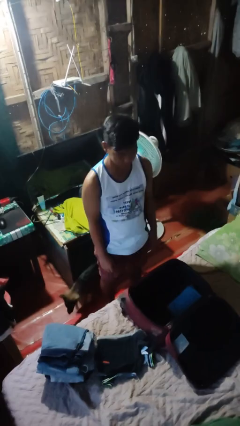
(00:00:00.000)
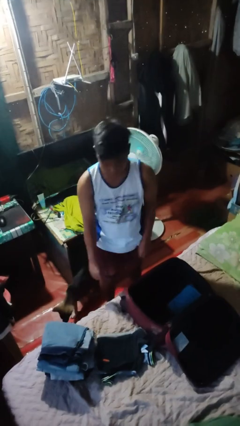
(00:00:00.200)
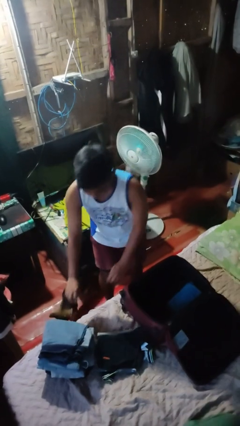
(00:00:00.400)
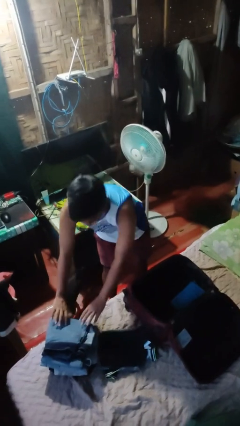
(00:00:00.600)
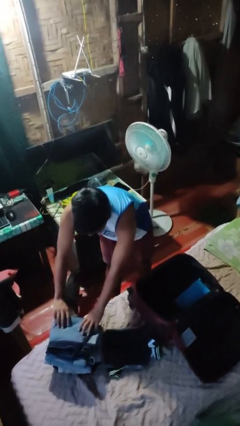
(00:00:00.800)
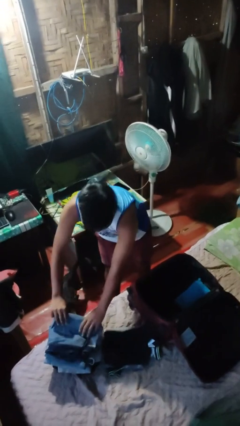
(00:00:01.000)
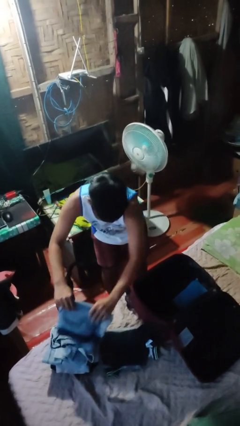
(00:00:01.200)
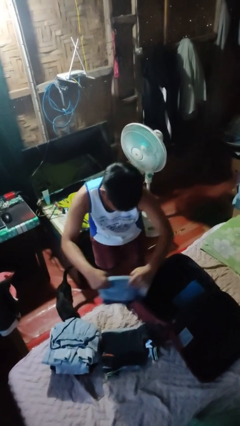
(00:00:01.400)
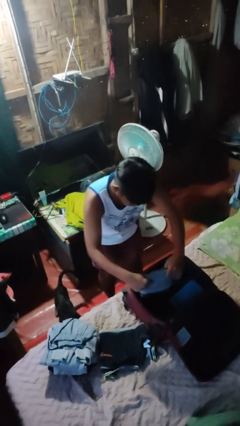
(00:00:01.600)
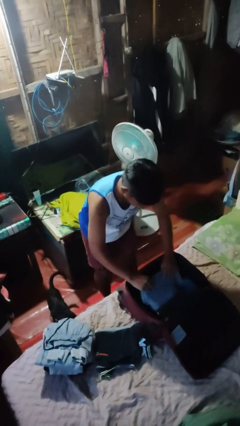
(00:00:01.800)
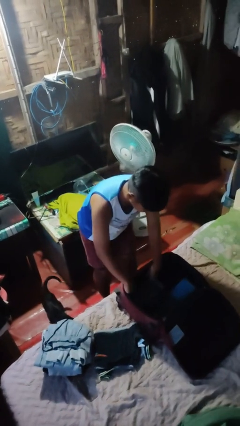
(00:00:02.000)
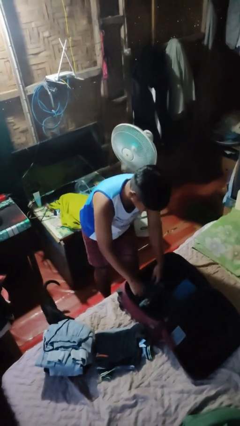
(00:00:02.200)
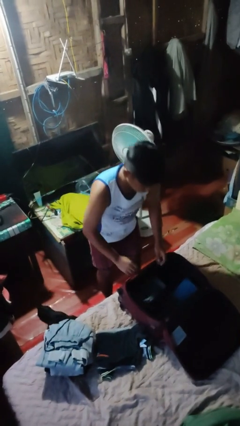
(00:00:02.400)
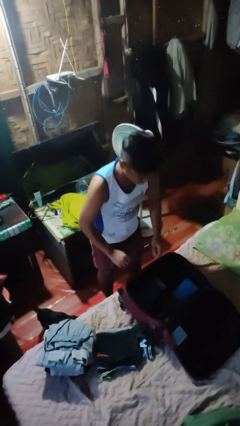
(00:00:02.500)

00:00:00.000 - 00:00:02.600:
person loads clothes into suitcase

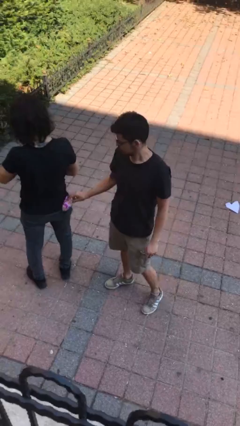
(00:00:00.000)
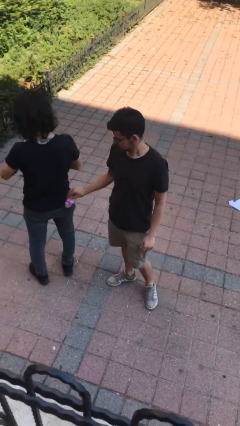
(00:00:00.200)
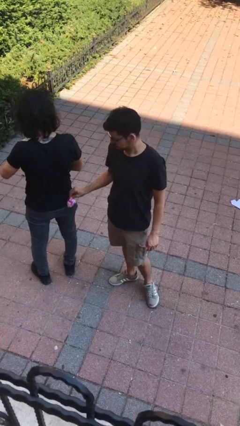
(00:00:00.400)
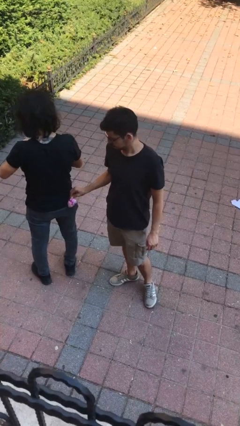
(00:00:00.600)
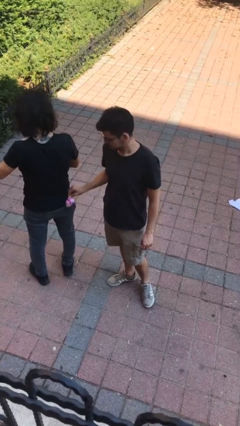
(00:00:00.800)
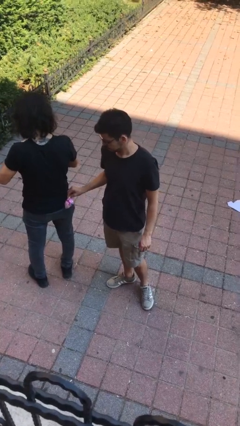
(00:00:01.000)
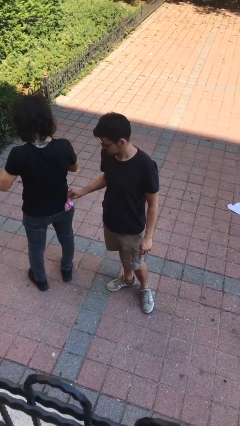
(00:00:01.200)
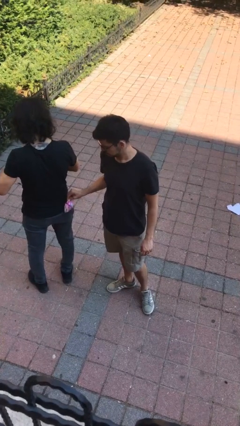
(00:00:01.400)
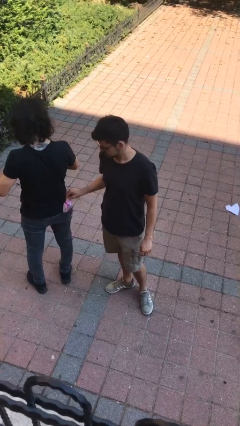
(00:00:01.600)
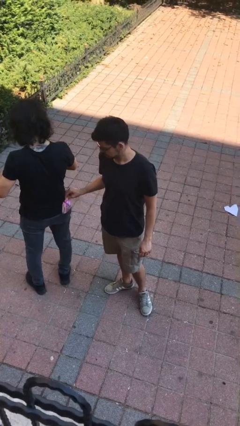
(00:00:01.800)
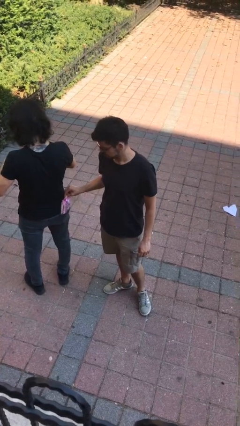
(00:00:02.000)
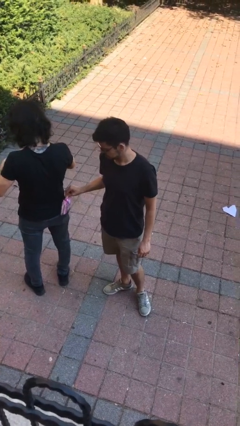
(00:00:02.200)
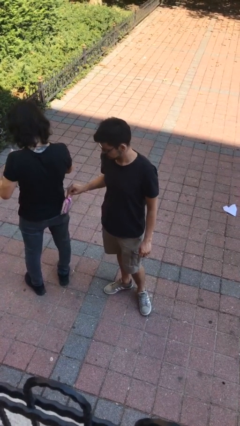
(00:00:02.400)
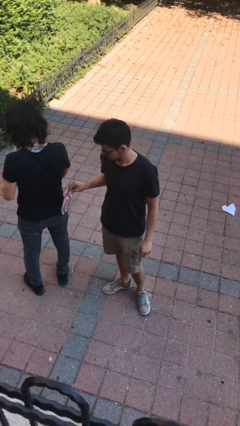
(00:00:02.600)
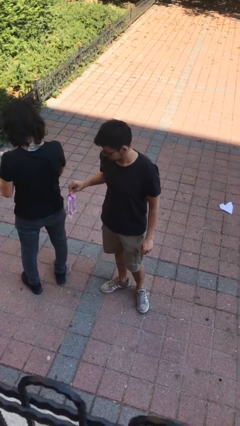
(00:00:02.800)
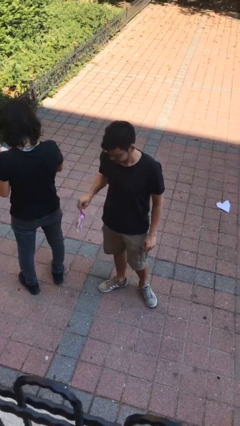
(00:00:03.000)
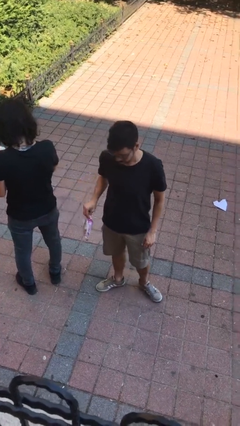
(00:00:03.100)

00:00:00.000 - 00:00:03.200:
person steals object from person

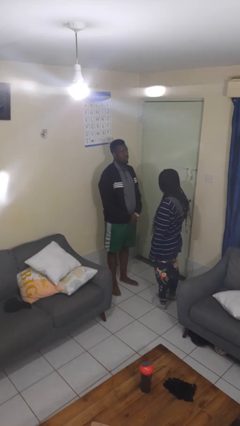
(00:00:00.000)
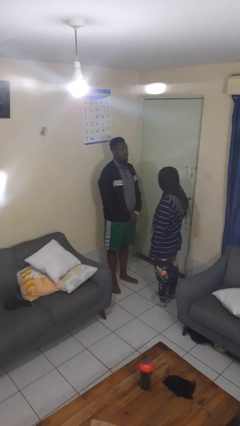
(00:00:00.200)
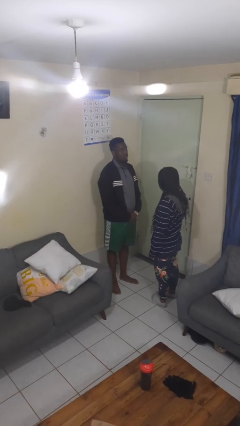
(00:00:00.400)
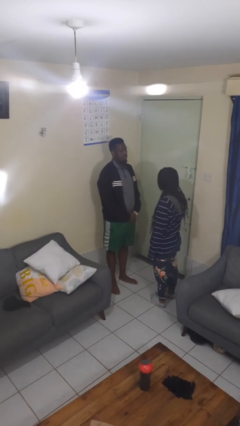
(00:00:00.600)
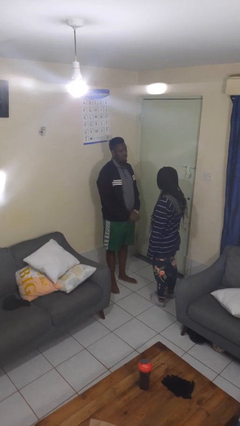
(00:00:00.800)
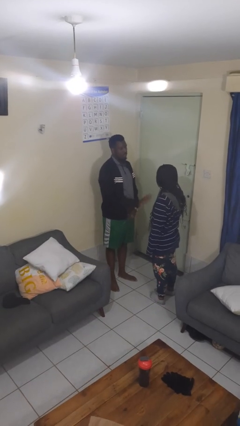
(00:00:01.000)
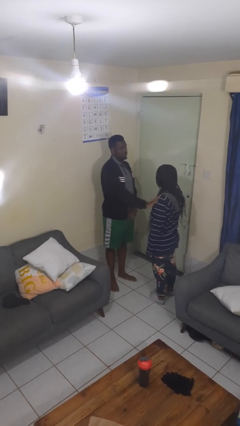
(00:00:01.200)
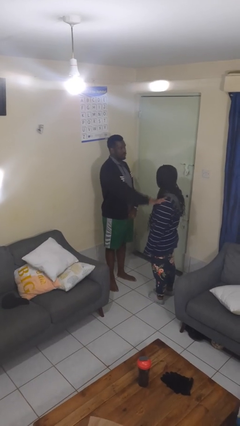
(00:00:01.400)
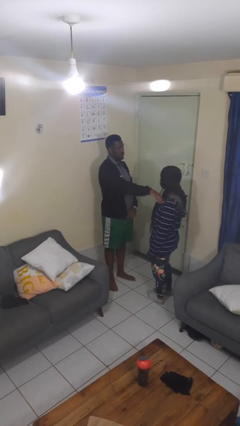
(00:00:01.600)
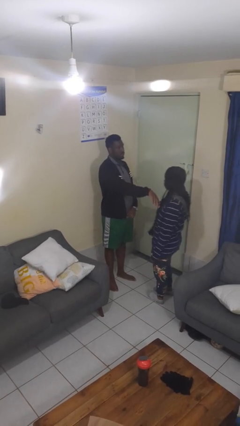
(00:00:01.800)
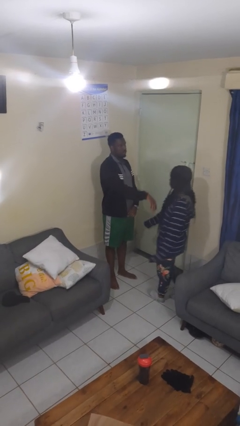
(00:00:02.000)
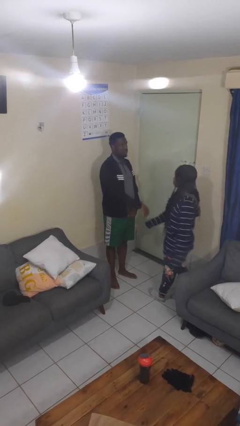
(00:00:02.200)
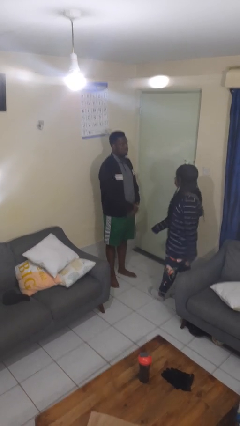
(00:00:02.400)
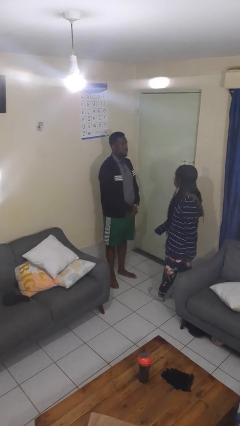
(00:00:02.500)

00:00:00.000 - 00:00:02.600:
person shoves person

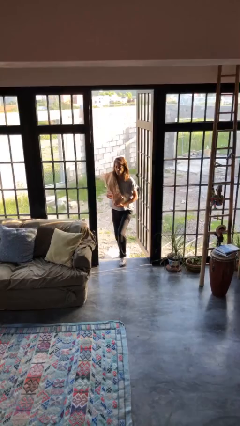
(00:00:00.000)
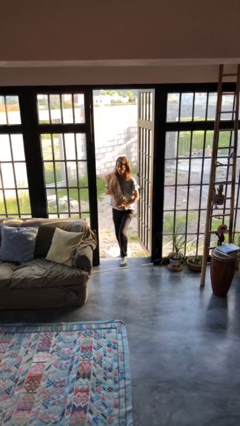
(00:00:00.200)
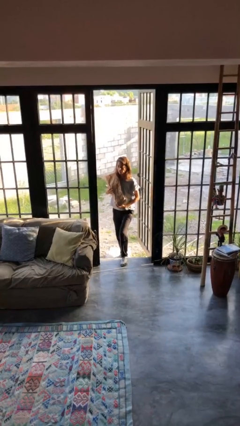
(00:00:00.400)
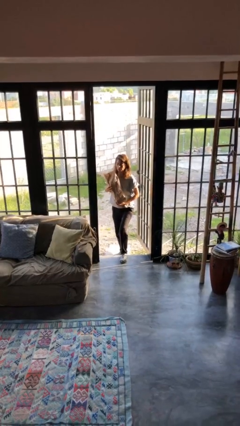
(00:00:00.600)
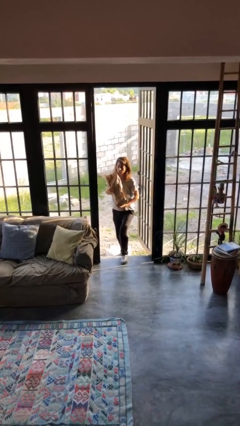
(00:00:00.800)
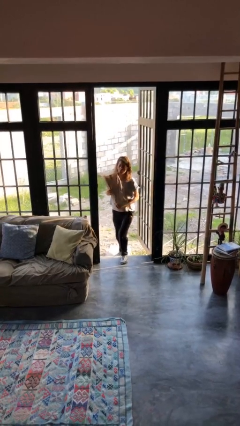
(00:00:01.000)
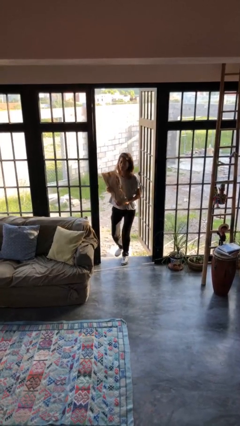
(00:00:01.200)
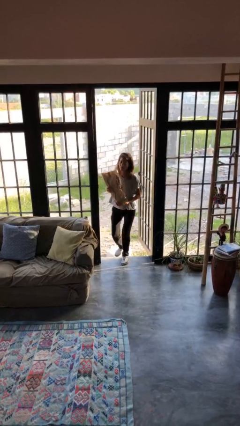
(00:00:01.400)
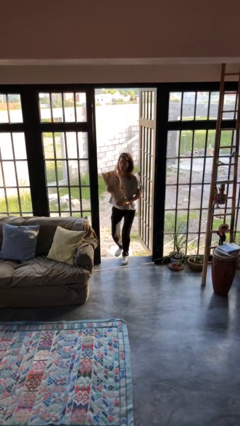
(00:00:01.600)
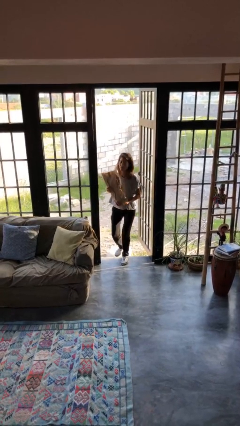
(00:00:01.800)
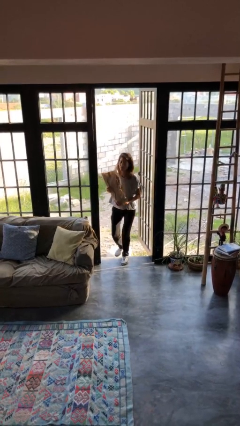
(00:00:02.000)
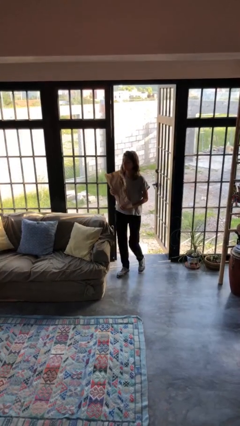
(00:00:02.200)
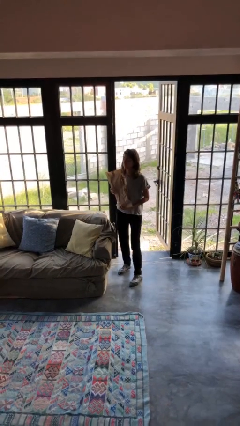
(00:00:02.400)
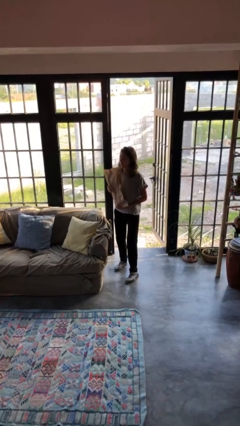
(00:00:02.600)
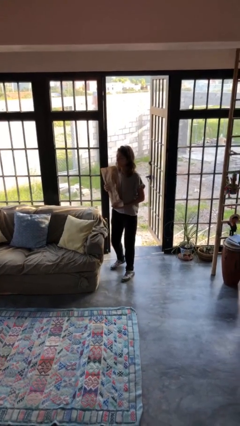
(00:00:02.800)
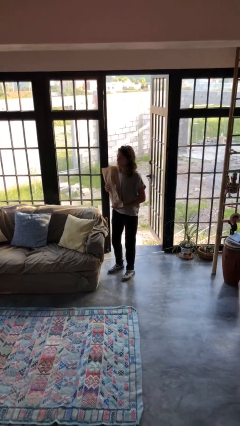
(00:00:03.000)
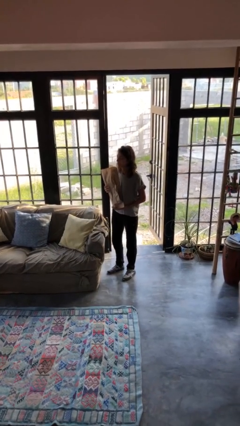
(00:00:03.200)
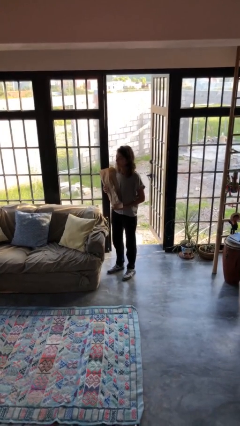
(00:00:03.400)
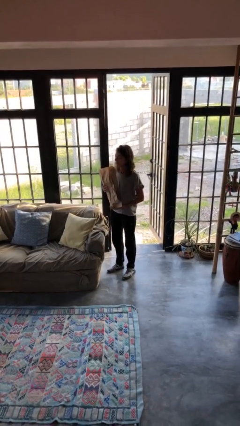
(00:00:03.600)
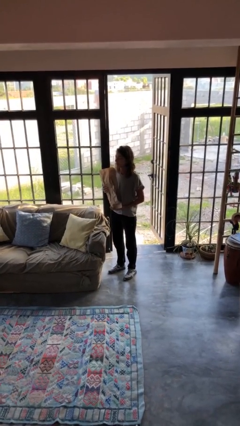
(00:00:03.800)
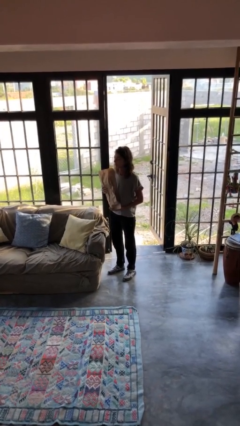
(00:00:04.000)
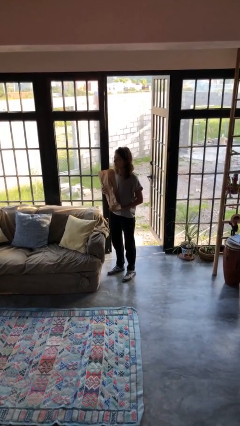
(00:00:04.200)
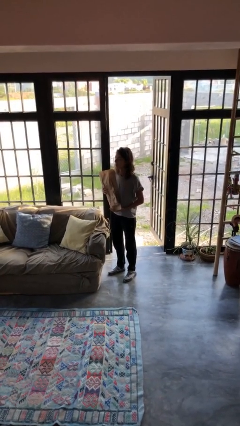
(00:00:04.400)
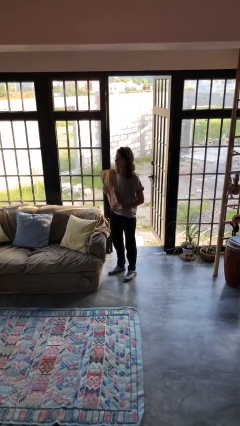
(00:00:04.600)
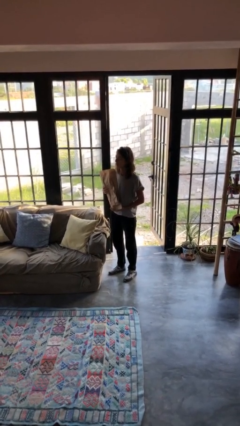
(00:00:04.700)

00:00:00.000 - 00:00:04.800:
person carries groceries

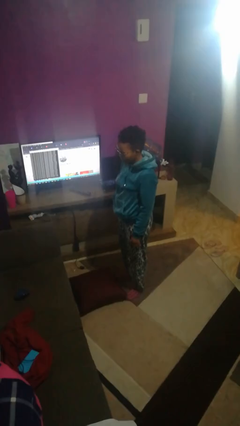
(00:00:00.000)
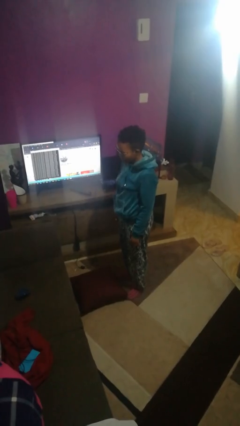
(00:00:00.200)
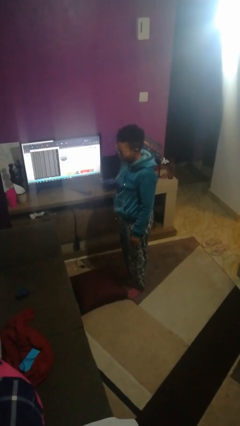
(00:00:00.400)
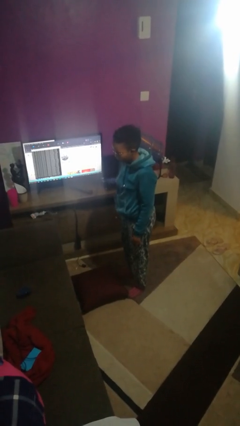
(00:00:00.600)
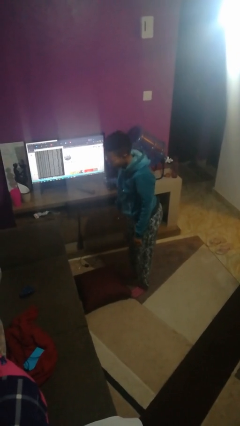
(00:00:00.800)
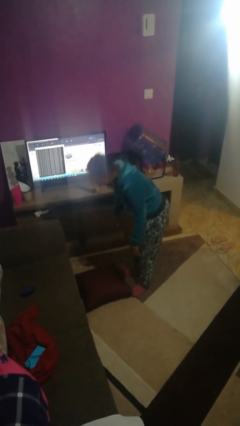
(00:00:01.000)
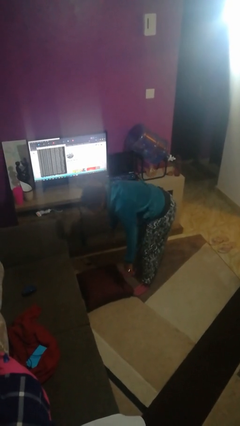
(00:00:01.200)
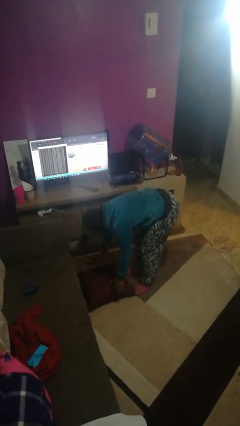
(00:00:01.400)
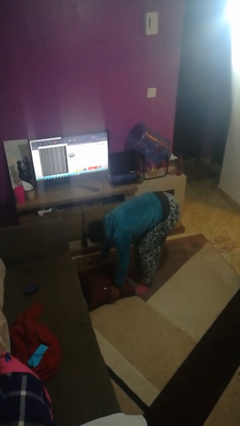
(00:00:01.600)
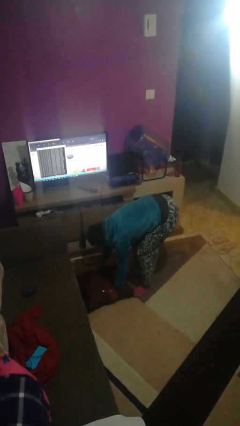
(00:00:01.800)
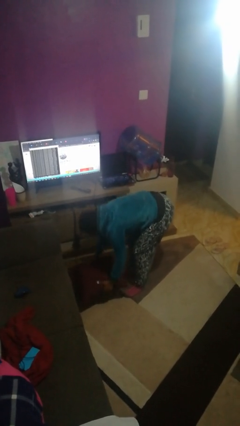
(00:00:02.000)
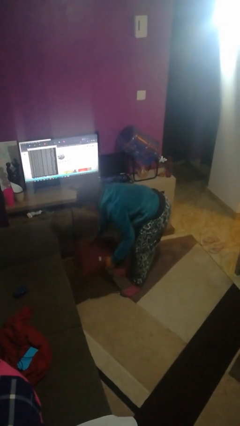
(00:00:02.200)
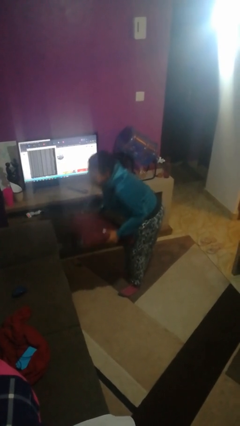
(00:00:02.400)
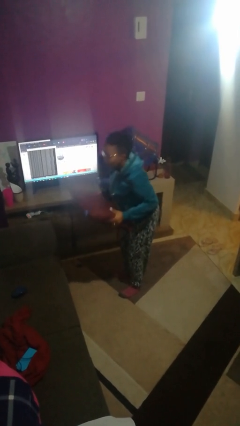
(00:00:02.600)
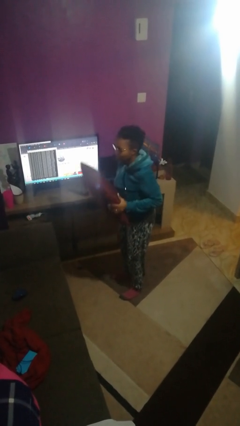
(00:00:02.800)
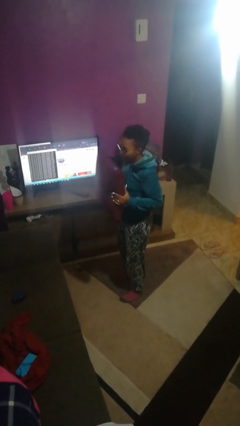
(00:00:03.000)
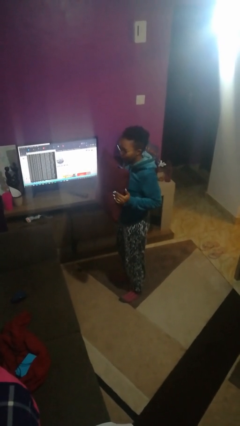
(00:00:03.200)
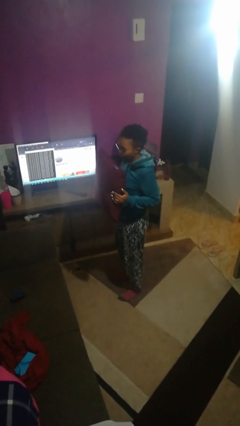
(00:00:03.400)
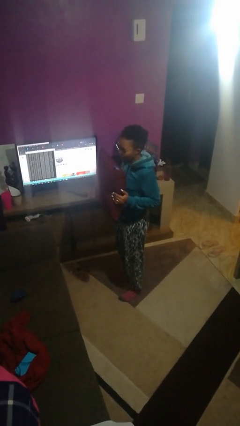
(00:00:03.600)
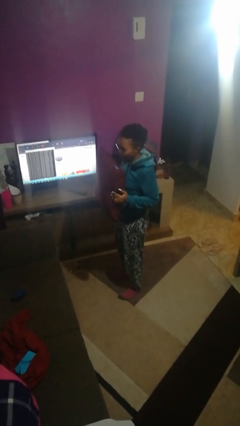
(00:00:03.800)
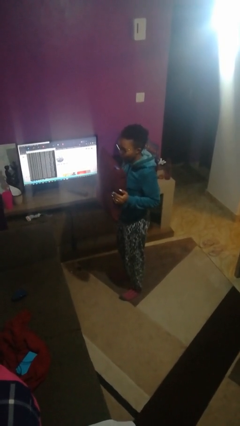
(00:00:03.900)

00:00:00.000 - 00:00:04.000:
person picks up object from floor

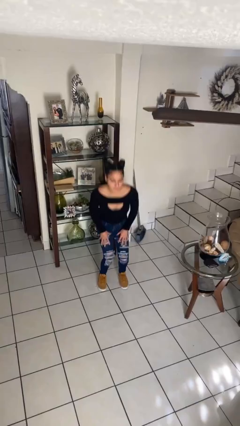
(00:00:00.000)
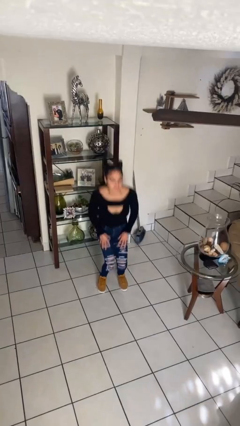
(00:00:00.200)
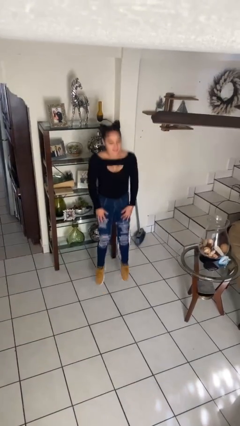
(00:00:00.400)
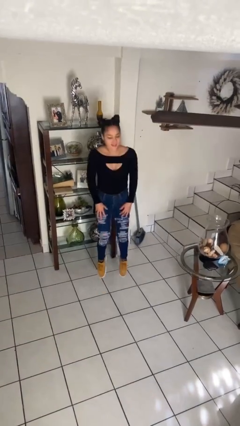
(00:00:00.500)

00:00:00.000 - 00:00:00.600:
person jumps
